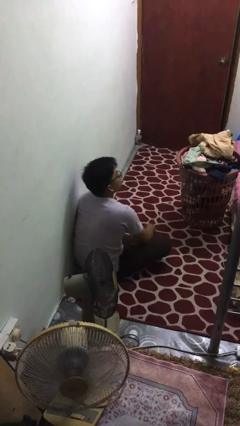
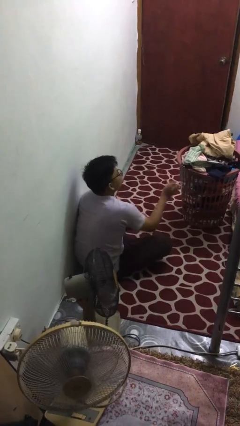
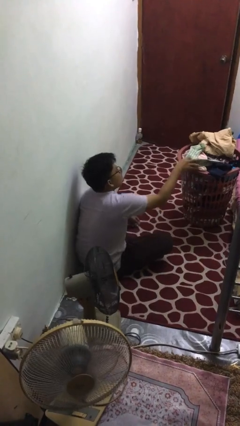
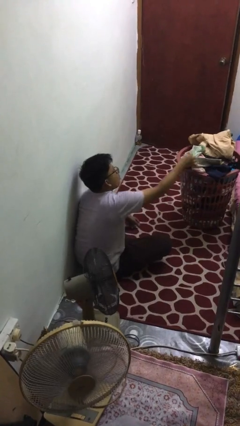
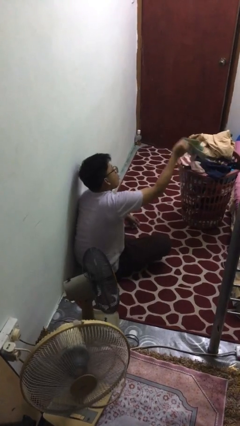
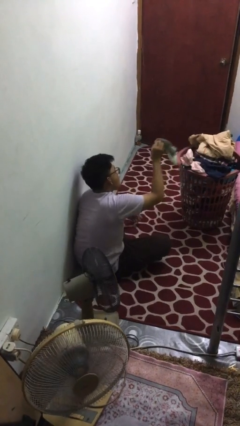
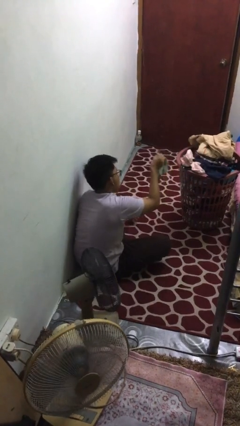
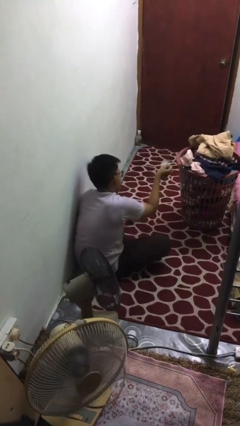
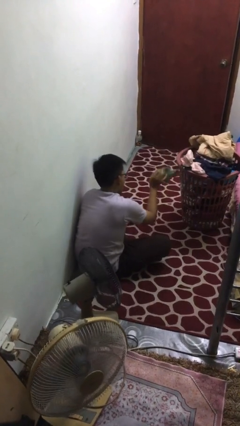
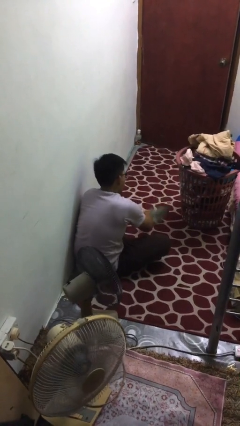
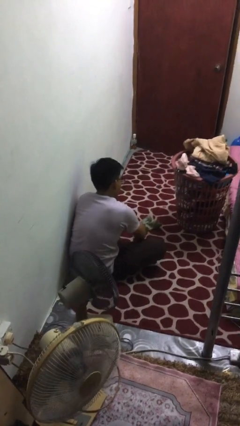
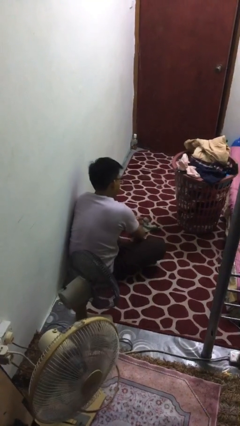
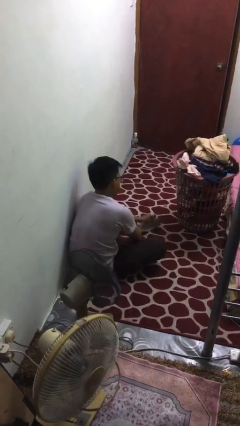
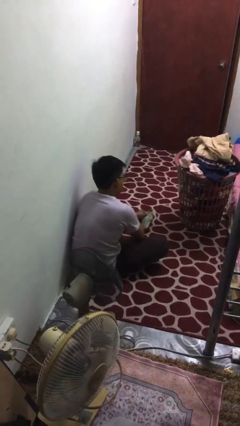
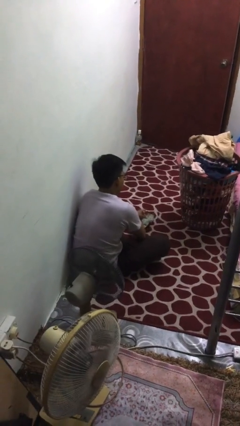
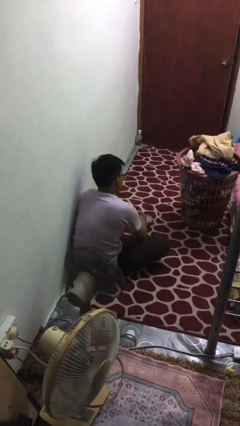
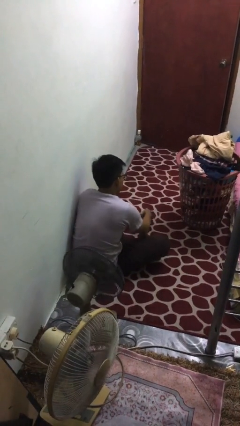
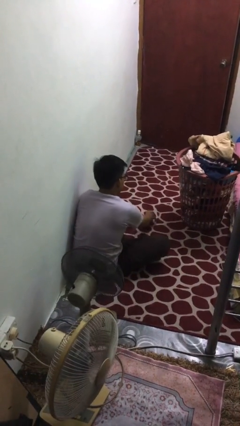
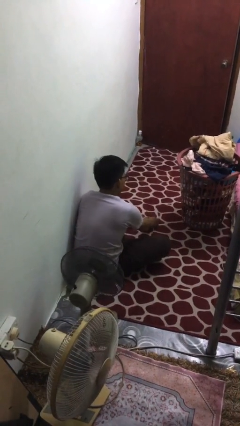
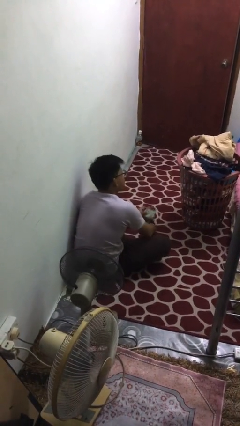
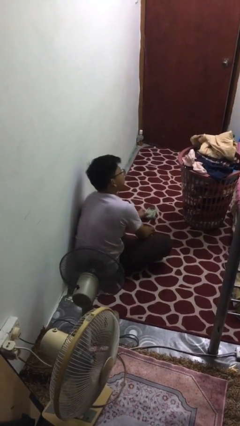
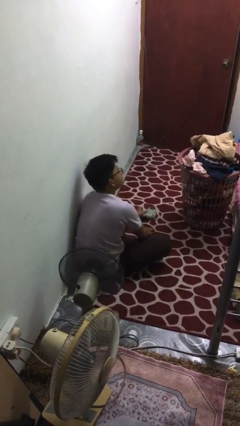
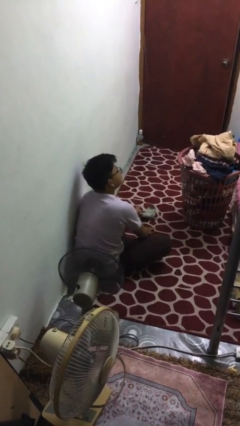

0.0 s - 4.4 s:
person folds socks

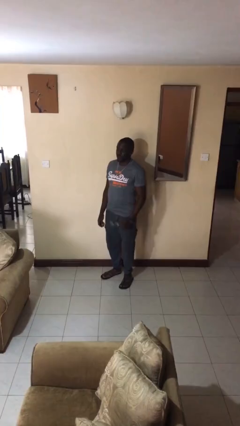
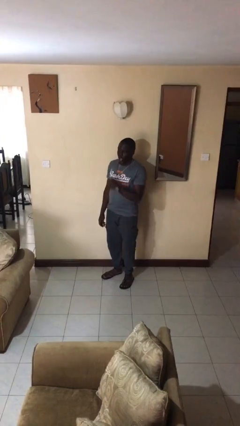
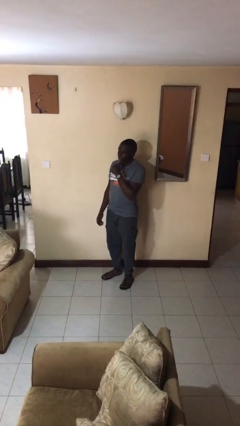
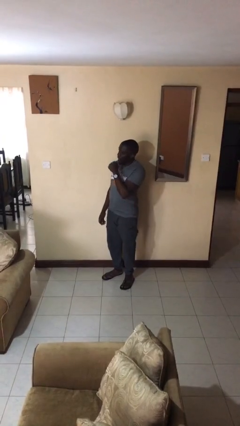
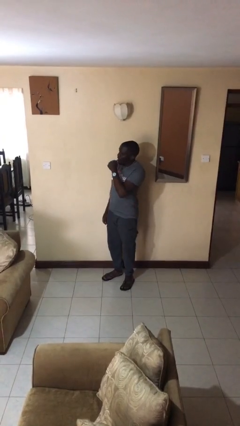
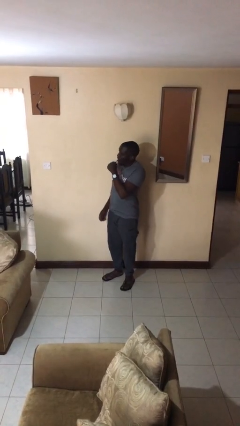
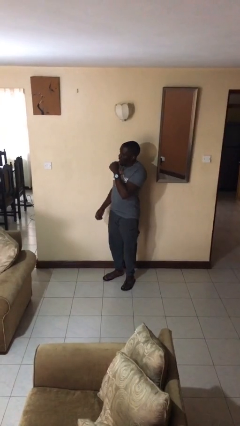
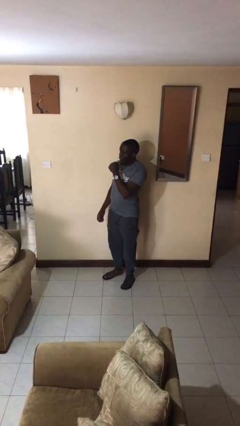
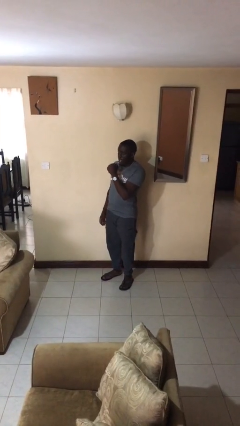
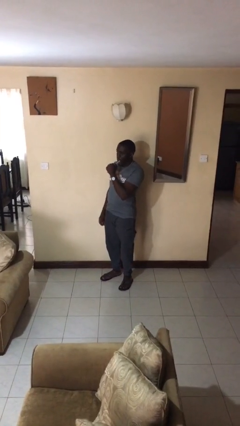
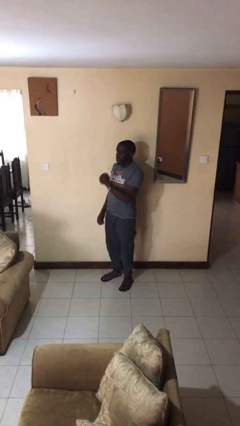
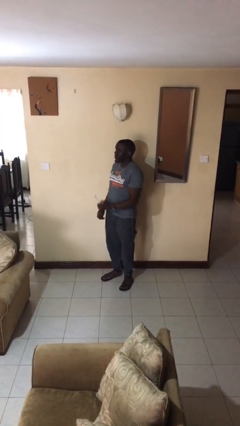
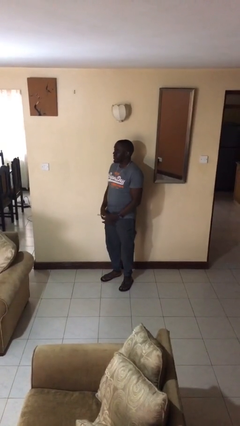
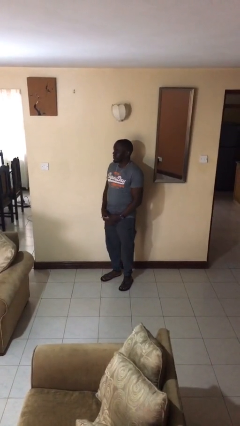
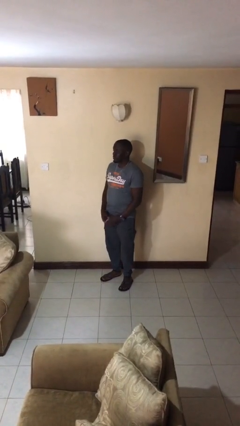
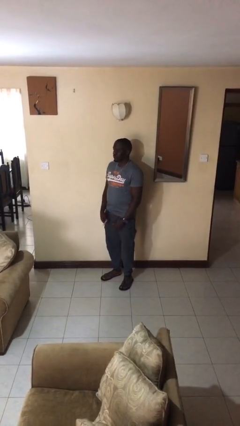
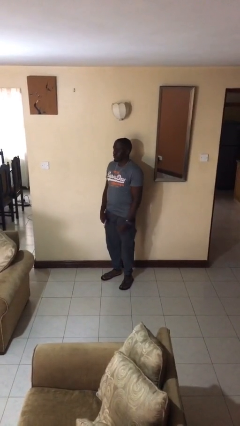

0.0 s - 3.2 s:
person brushes teeth

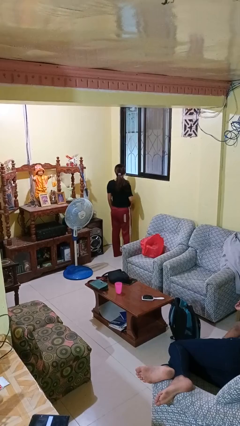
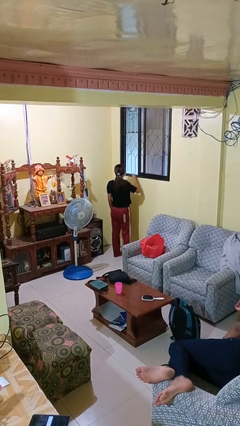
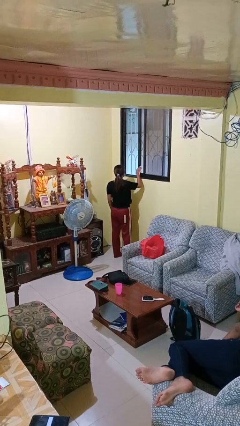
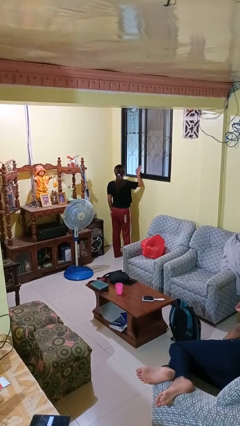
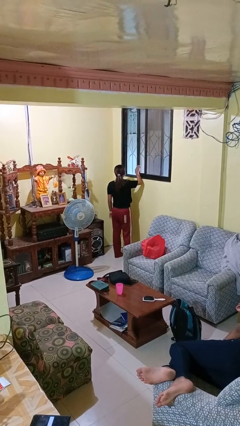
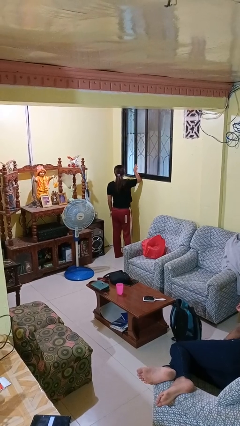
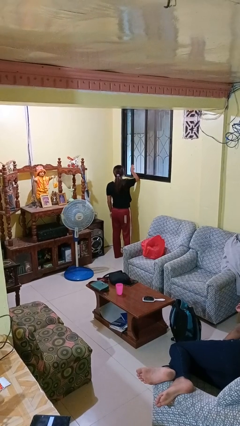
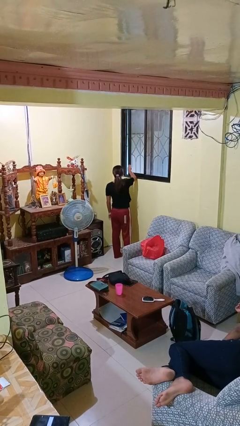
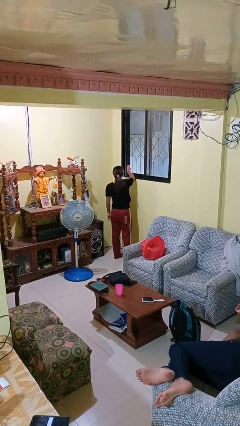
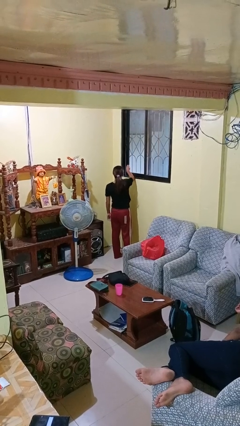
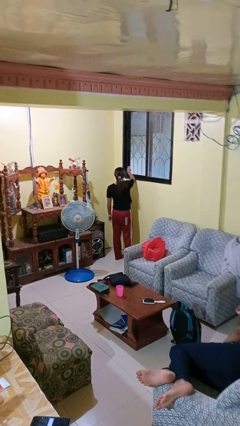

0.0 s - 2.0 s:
person closes home window

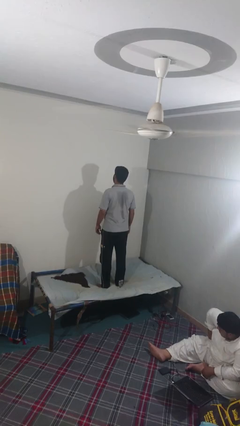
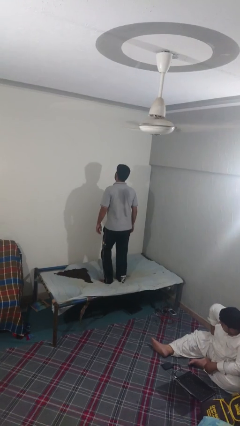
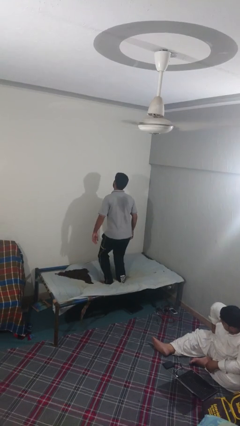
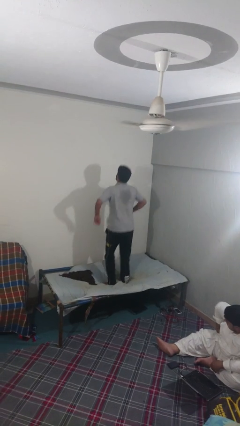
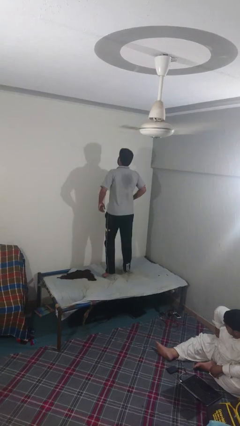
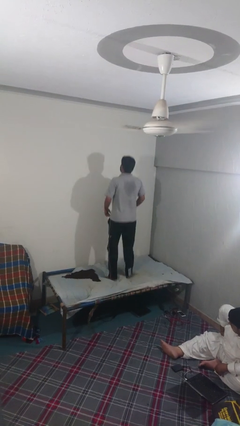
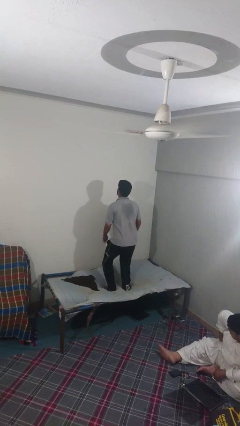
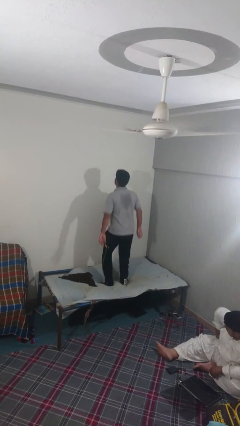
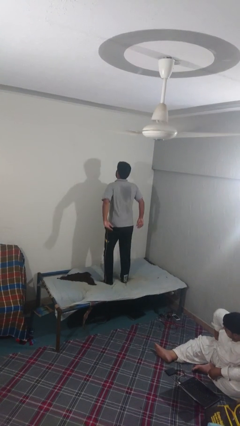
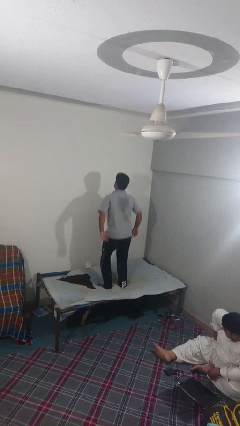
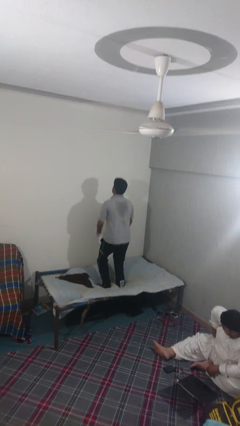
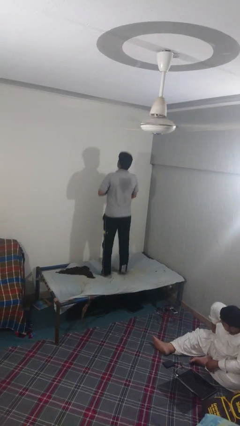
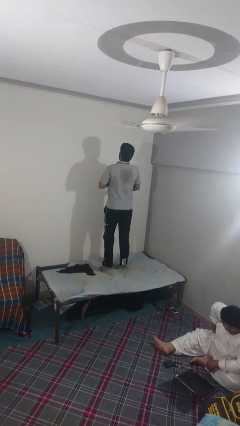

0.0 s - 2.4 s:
person jumps on bed

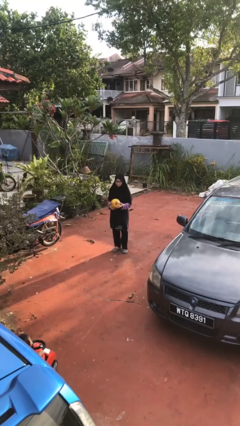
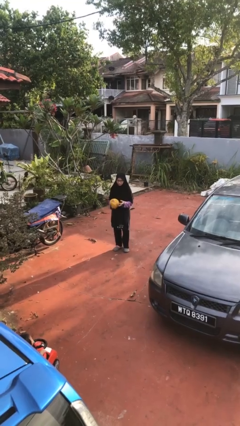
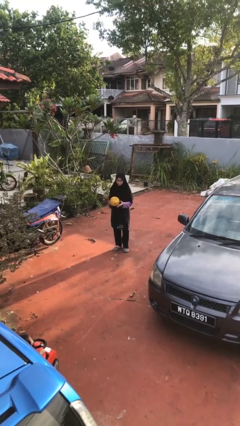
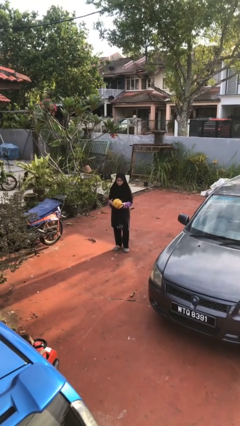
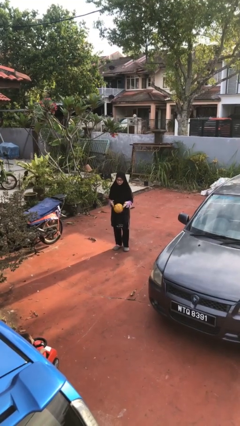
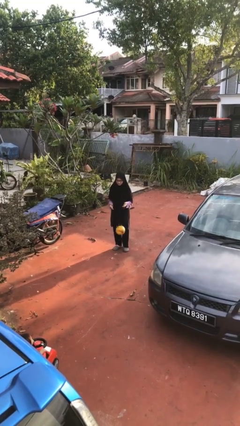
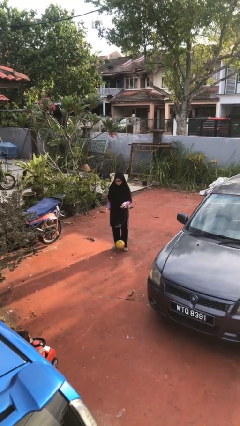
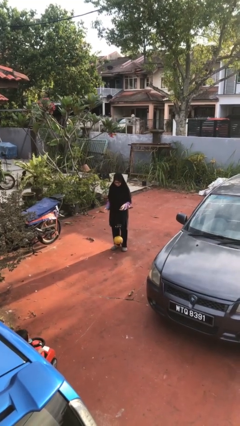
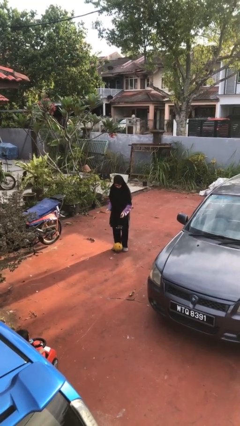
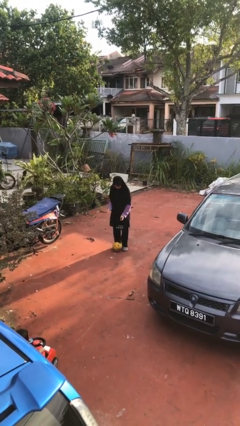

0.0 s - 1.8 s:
person drops object

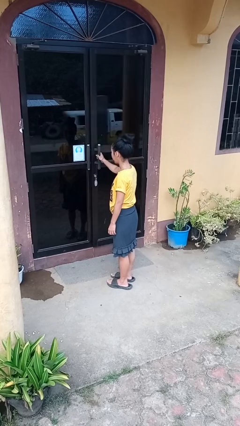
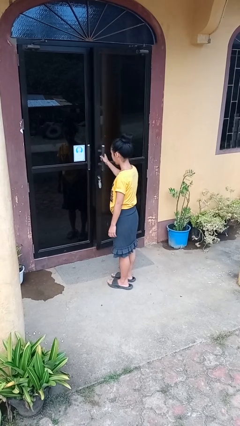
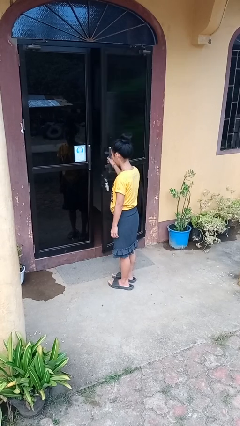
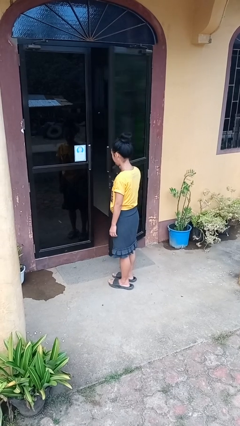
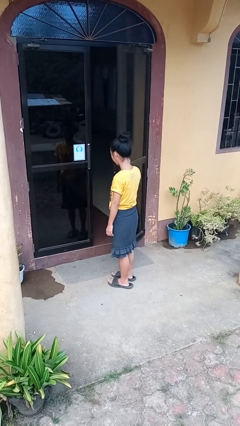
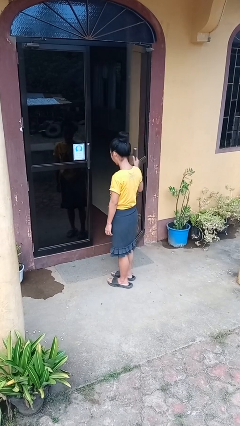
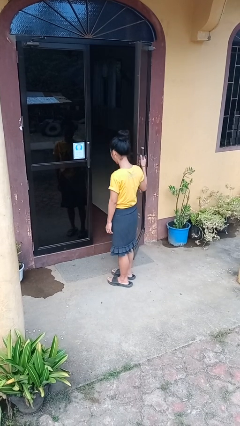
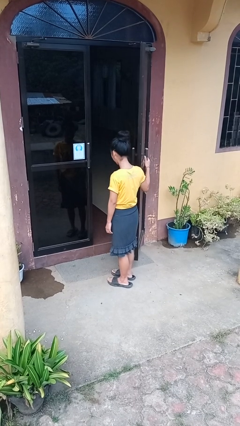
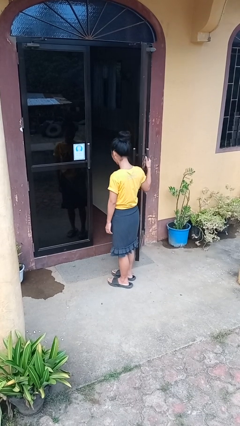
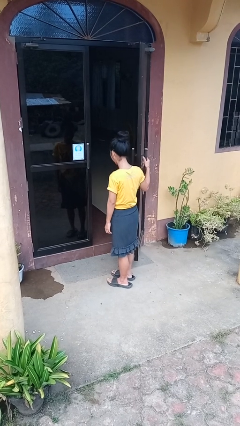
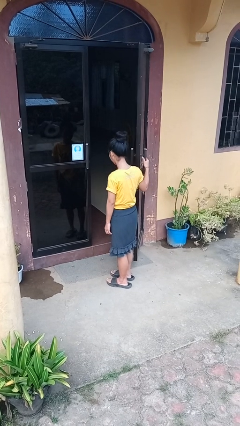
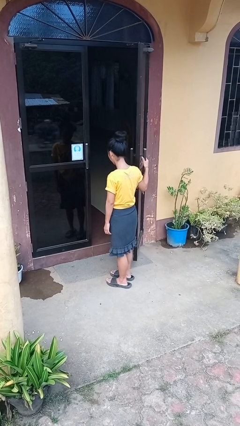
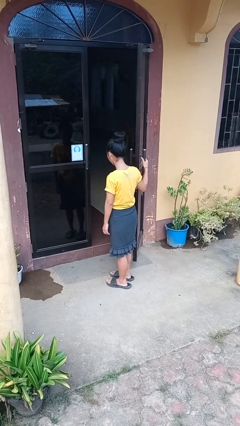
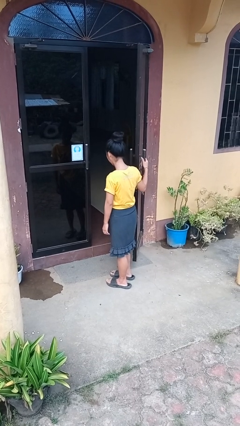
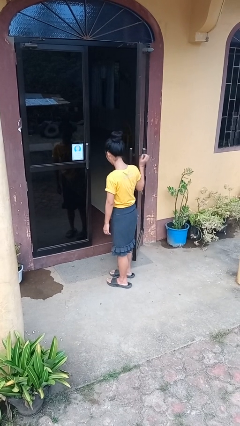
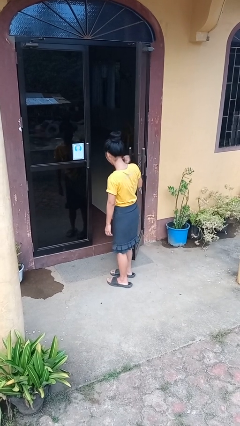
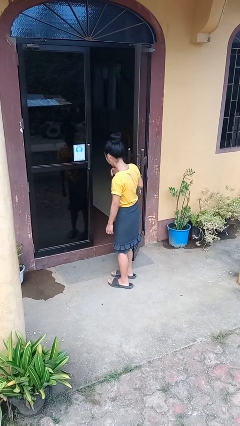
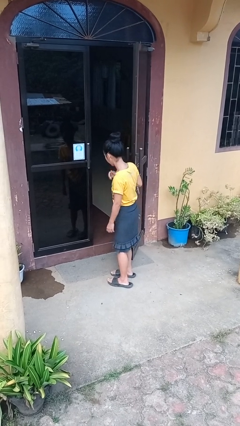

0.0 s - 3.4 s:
person opens facility door
